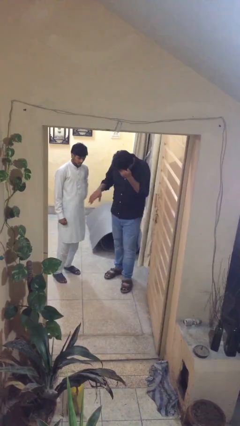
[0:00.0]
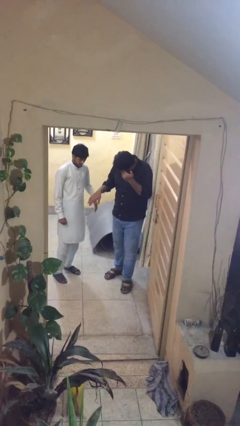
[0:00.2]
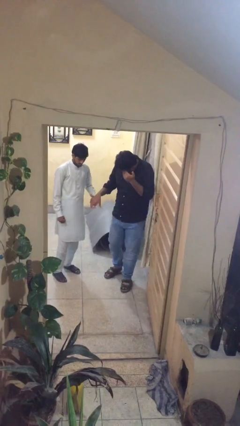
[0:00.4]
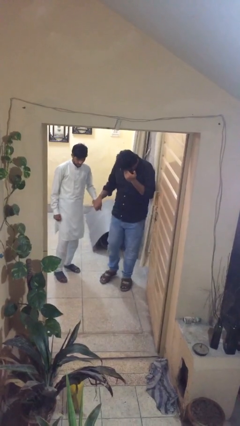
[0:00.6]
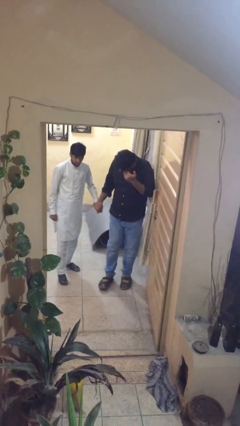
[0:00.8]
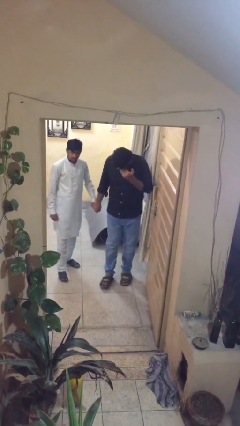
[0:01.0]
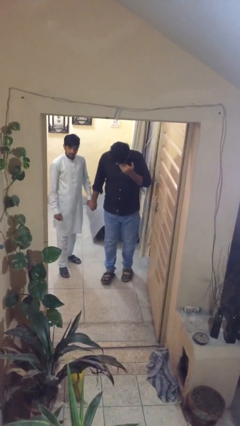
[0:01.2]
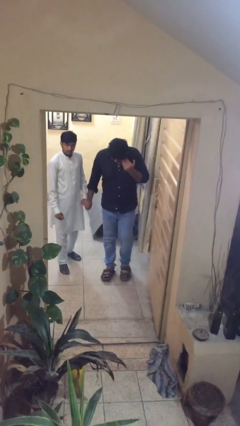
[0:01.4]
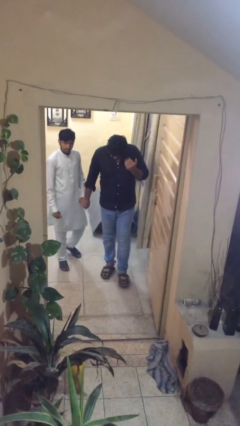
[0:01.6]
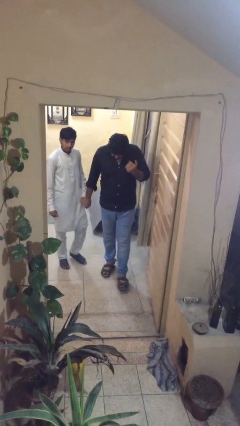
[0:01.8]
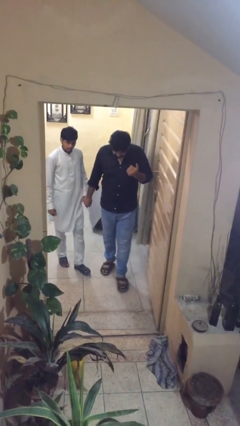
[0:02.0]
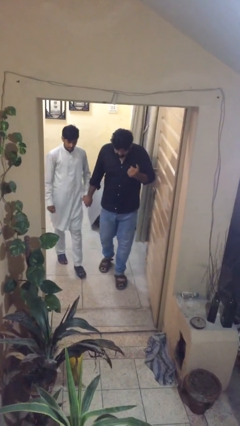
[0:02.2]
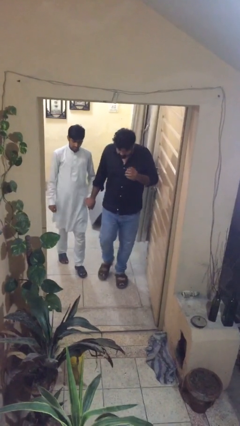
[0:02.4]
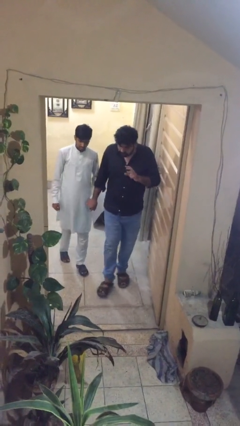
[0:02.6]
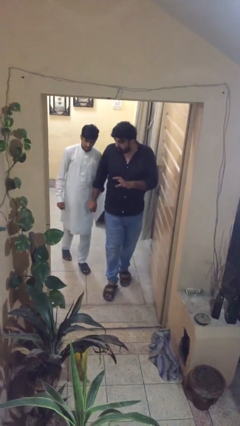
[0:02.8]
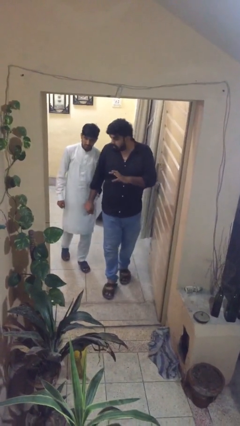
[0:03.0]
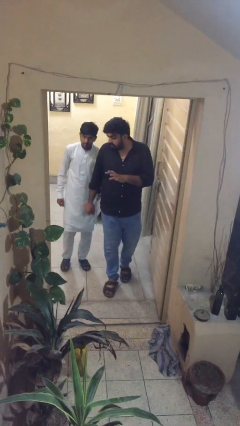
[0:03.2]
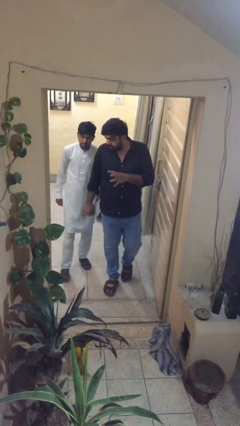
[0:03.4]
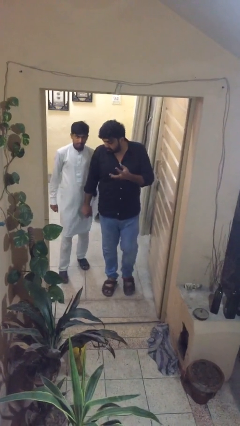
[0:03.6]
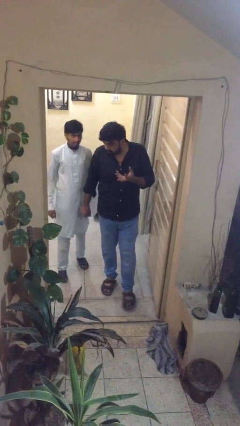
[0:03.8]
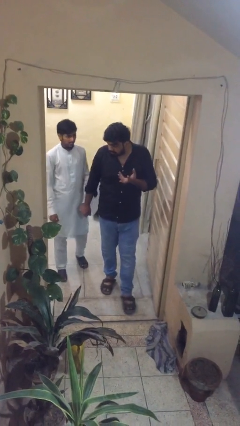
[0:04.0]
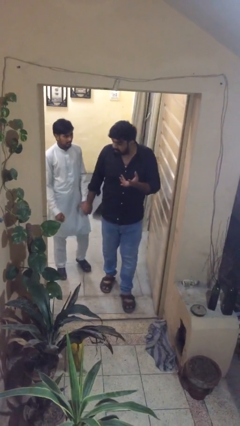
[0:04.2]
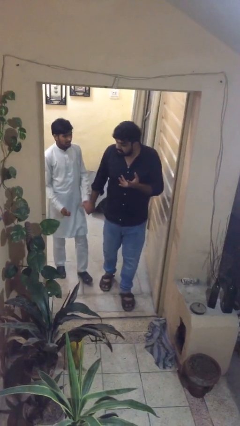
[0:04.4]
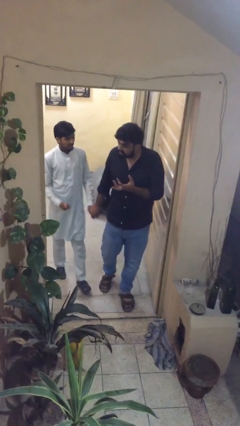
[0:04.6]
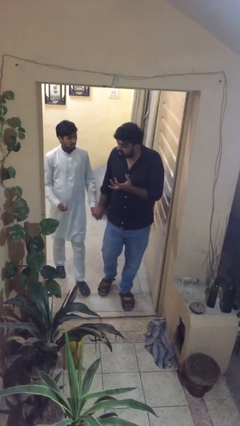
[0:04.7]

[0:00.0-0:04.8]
person holds hand

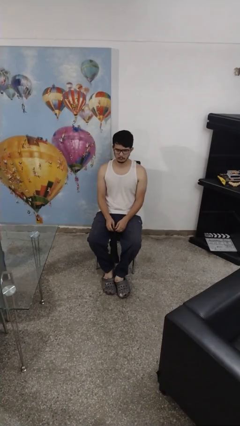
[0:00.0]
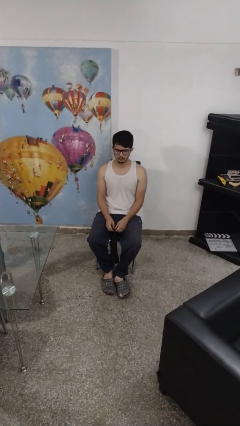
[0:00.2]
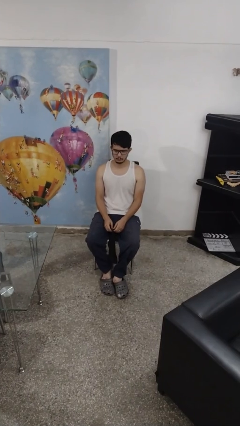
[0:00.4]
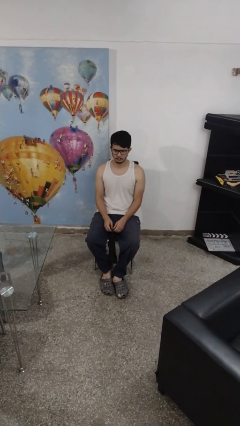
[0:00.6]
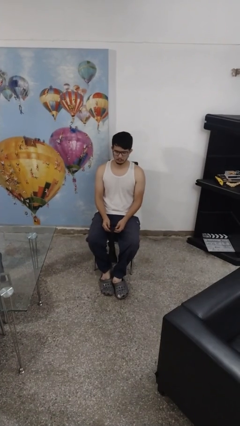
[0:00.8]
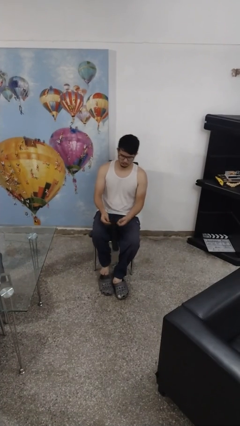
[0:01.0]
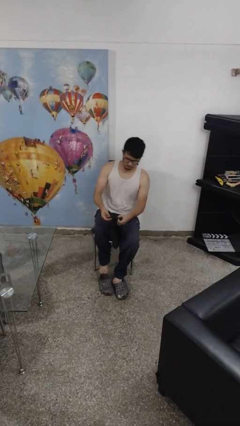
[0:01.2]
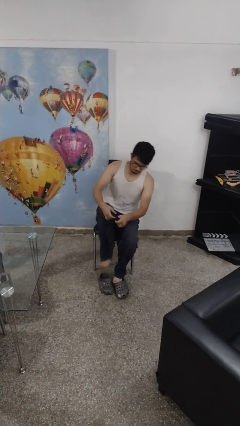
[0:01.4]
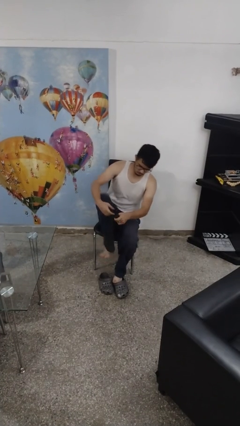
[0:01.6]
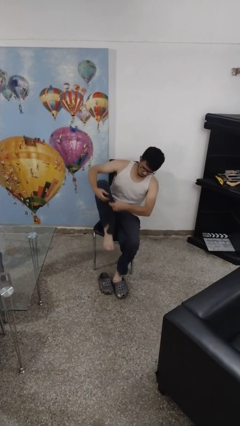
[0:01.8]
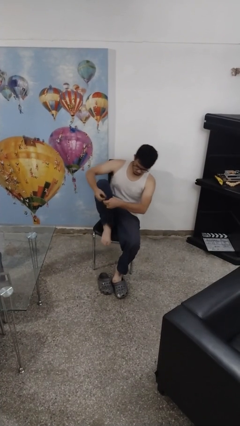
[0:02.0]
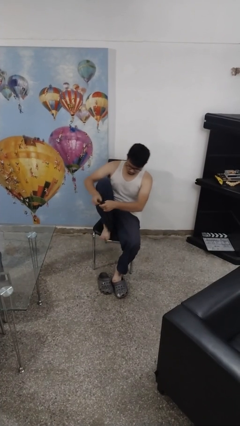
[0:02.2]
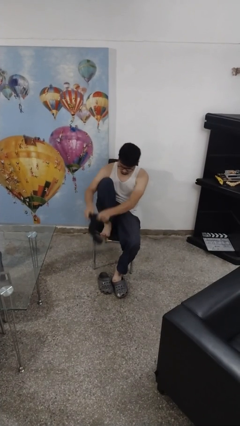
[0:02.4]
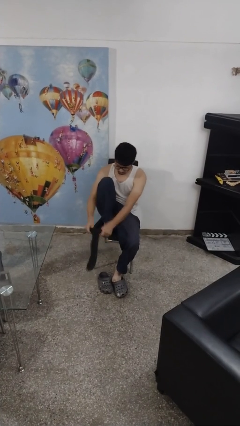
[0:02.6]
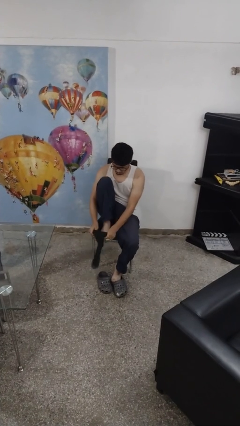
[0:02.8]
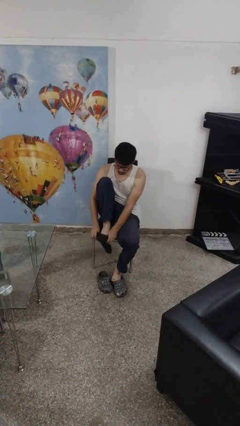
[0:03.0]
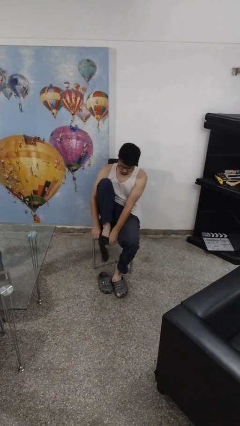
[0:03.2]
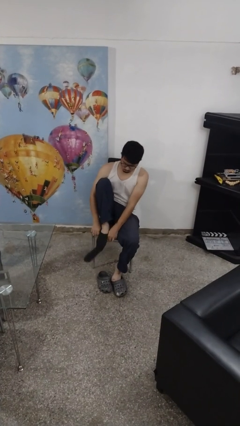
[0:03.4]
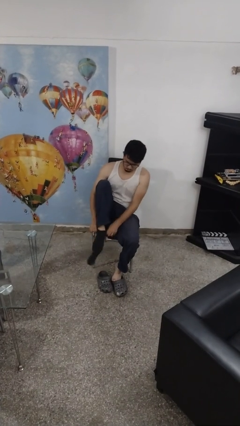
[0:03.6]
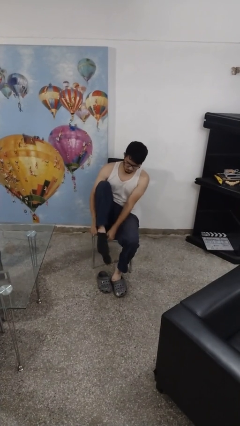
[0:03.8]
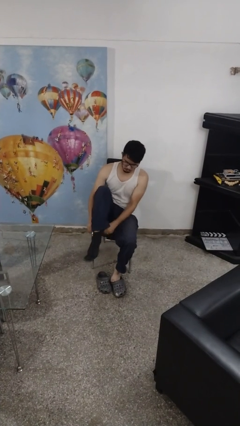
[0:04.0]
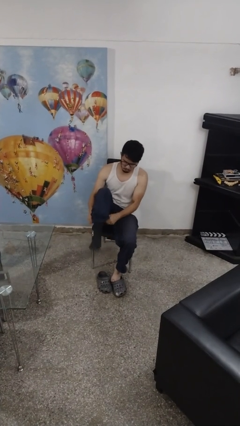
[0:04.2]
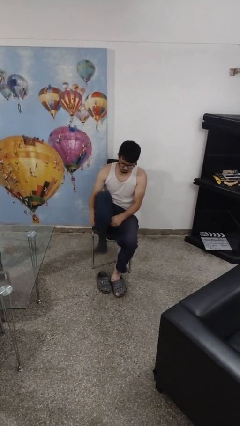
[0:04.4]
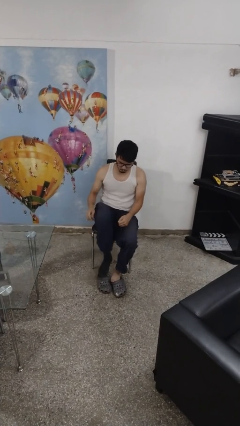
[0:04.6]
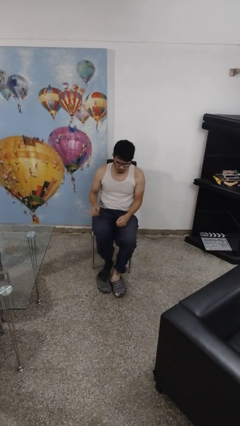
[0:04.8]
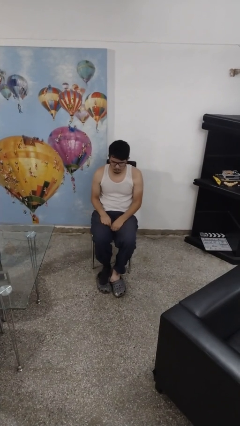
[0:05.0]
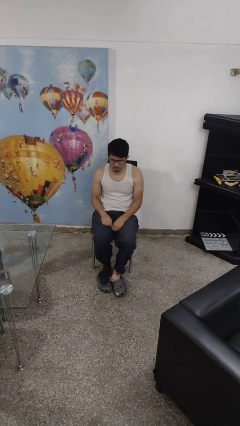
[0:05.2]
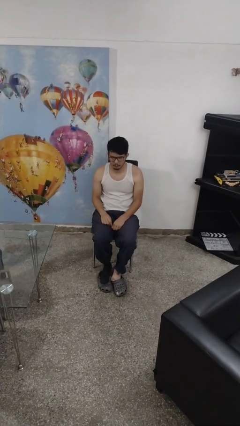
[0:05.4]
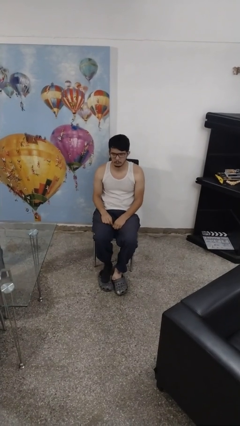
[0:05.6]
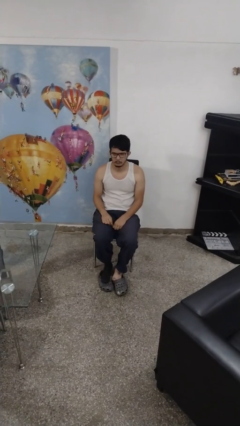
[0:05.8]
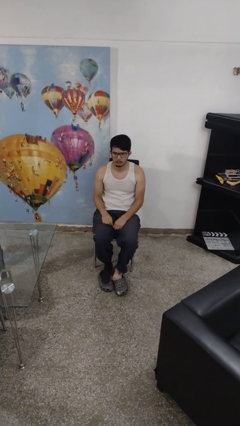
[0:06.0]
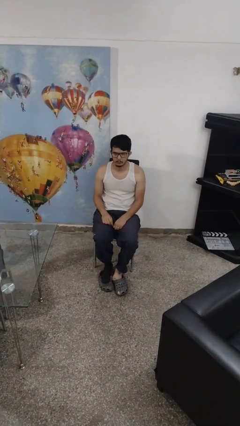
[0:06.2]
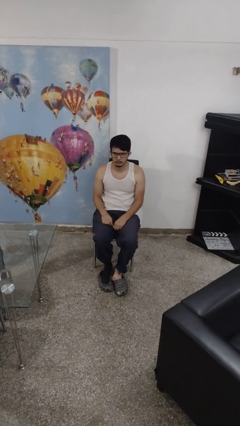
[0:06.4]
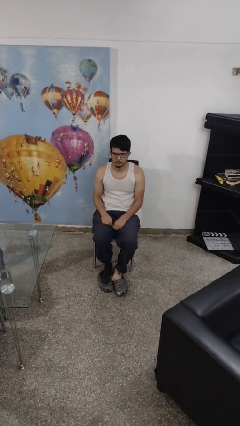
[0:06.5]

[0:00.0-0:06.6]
person puts on socks

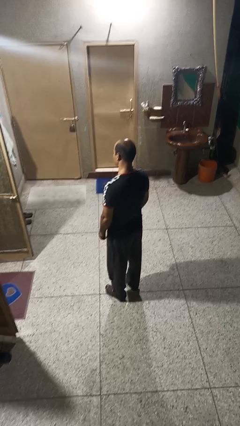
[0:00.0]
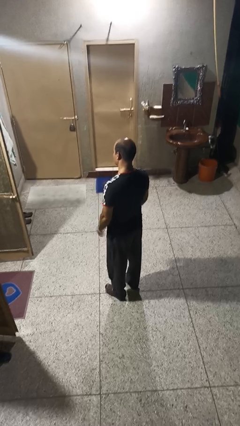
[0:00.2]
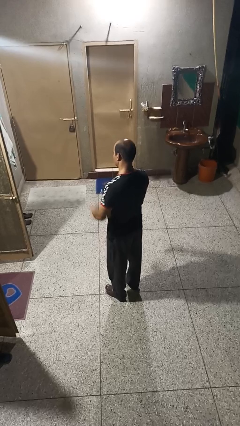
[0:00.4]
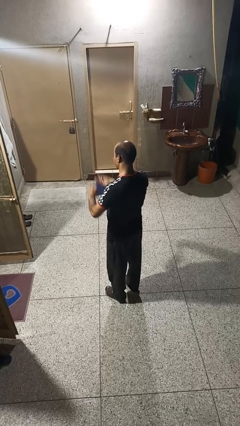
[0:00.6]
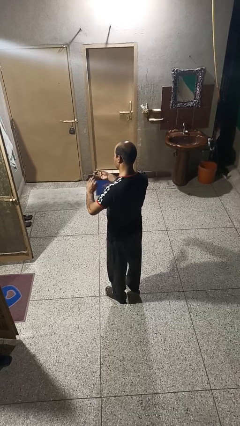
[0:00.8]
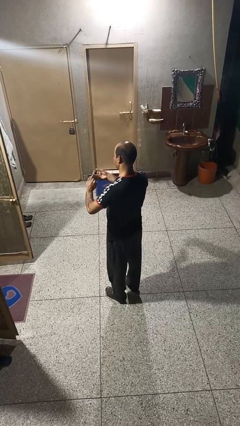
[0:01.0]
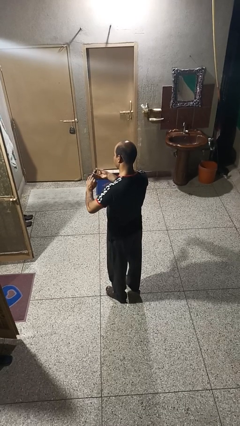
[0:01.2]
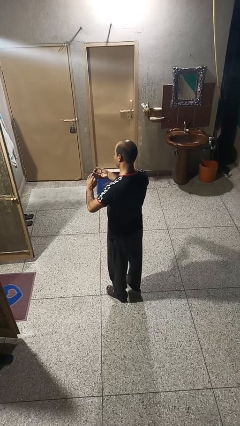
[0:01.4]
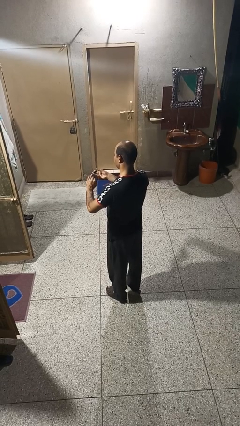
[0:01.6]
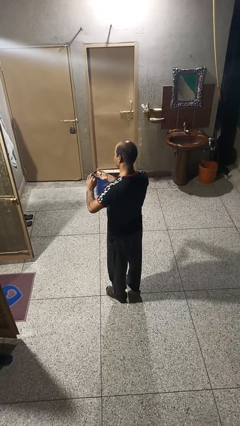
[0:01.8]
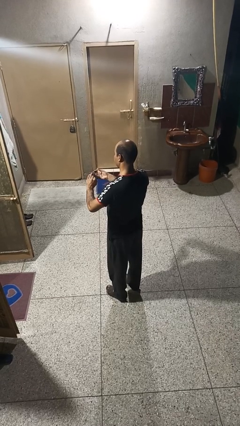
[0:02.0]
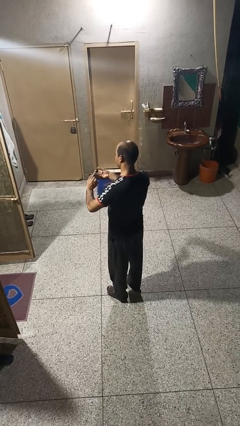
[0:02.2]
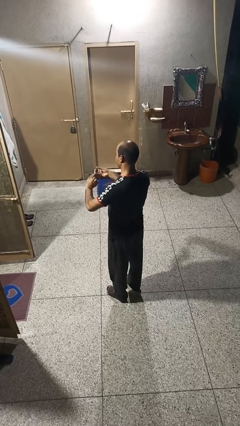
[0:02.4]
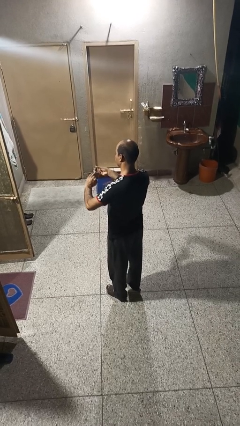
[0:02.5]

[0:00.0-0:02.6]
person clips fingernails

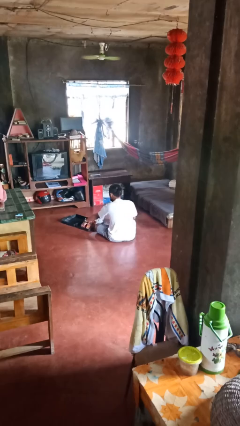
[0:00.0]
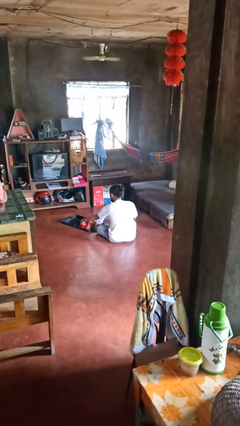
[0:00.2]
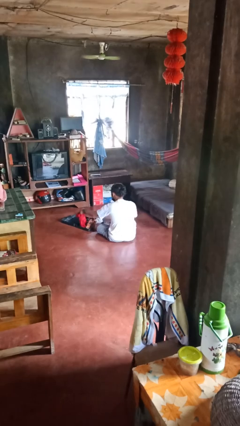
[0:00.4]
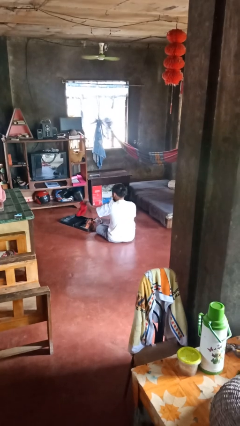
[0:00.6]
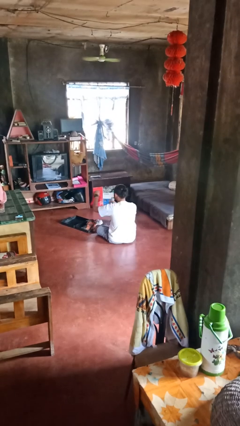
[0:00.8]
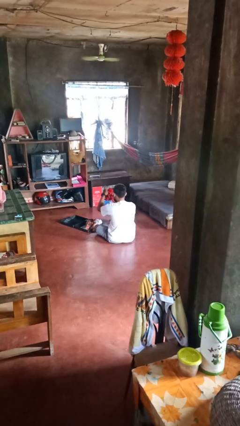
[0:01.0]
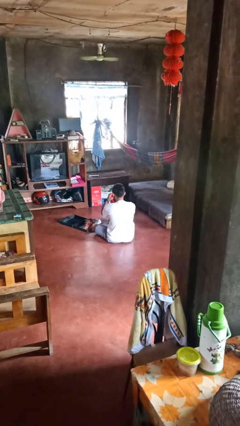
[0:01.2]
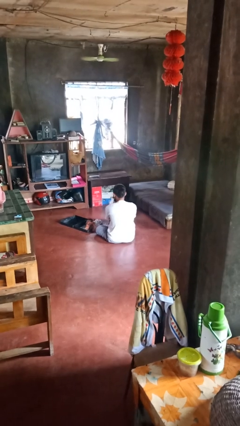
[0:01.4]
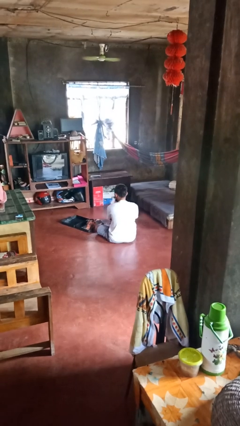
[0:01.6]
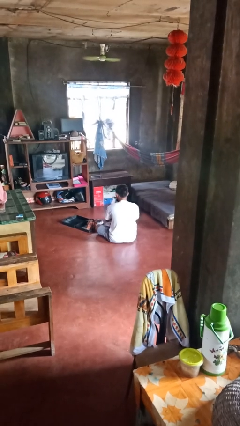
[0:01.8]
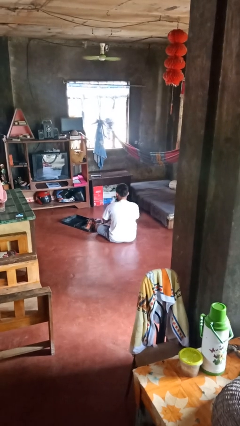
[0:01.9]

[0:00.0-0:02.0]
person unloads clothes from suitcase

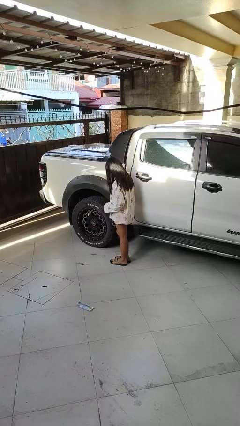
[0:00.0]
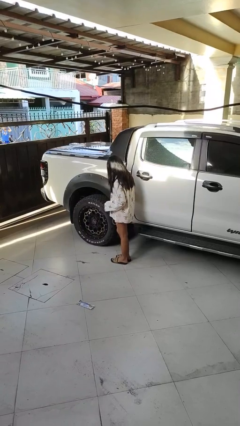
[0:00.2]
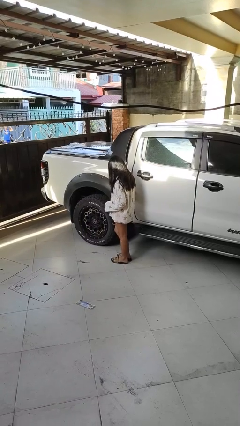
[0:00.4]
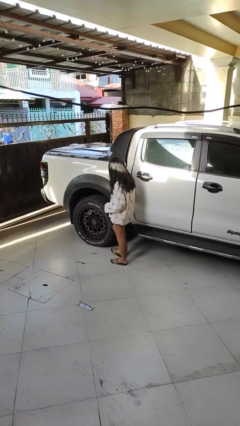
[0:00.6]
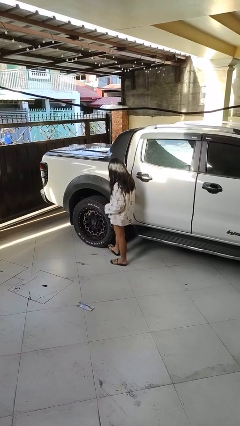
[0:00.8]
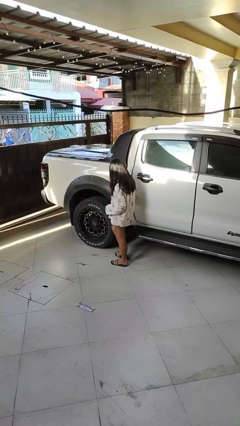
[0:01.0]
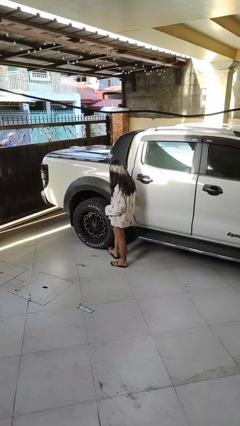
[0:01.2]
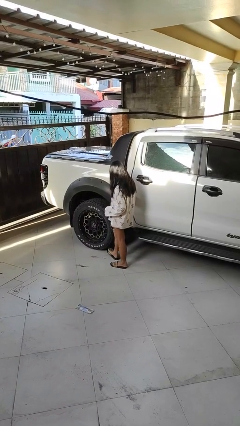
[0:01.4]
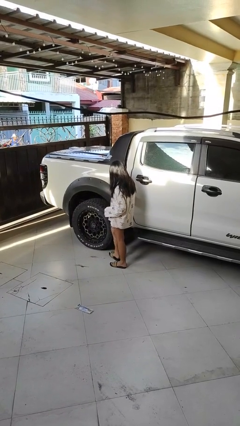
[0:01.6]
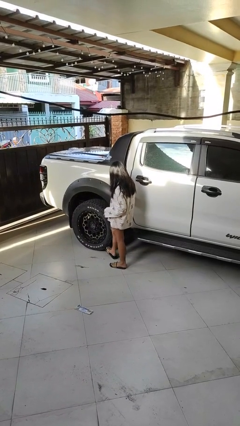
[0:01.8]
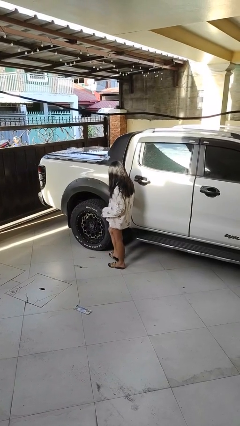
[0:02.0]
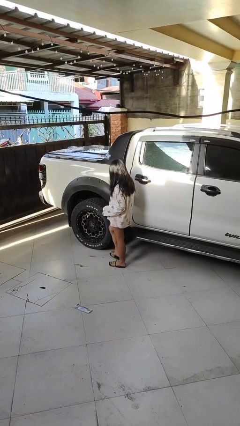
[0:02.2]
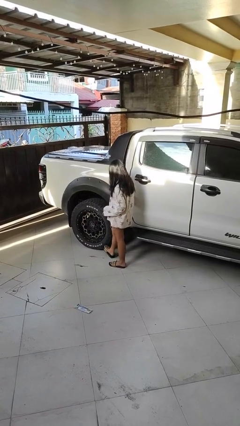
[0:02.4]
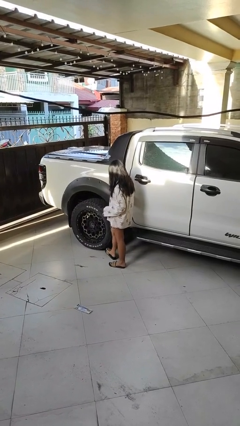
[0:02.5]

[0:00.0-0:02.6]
person kicks car tires
